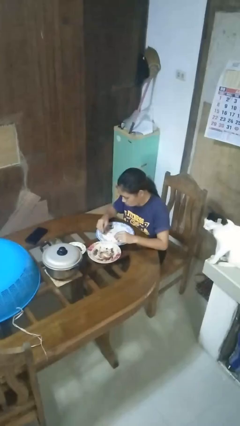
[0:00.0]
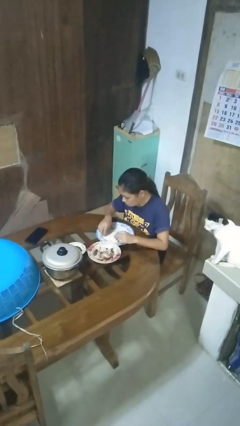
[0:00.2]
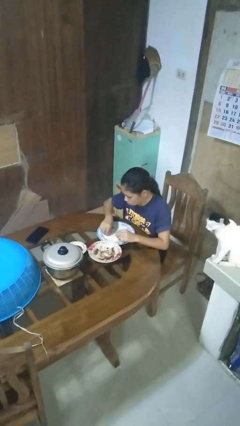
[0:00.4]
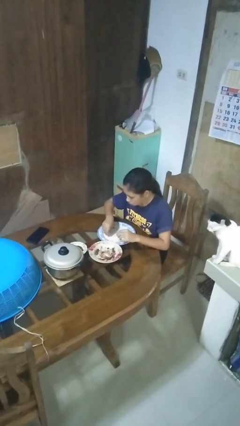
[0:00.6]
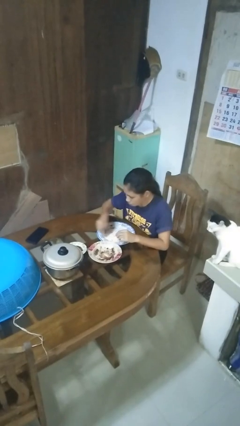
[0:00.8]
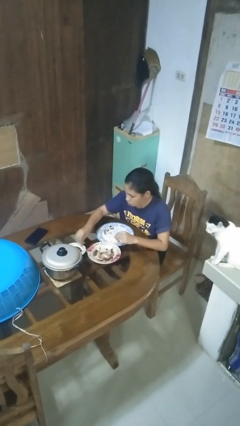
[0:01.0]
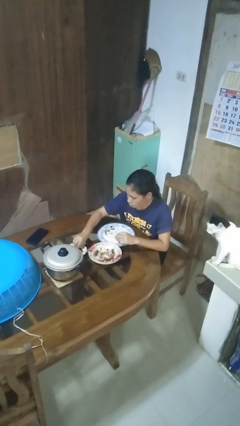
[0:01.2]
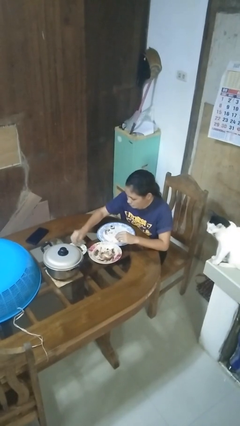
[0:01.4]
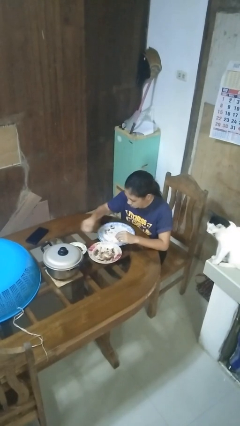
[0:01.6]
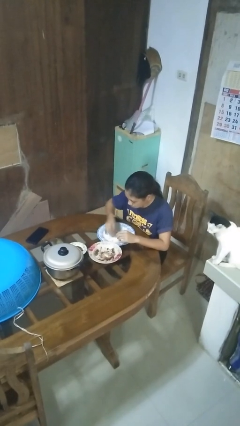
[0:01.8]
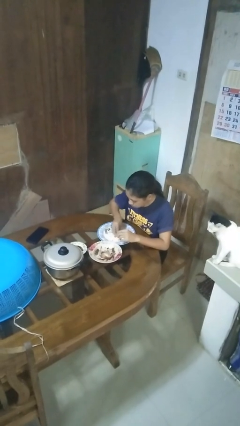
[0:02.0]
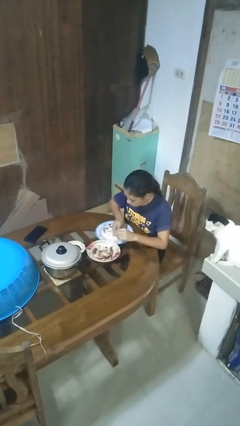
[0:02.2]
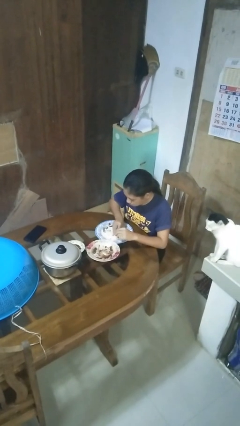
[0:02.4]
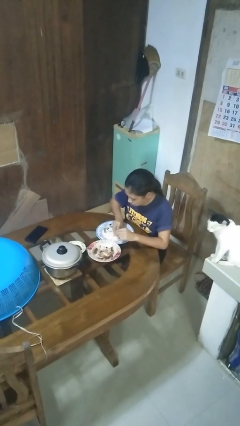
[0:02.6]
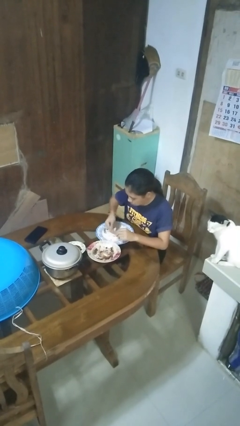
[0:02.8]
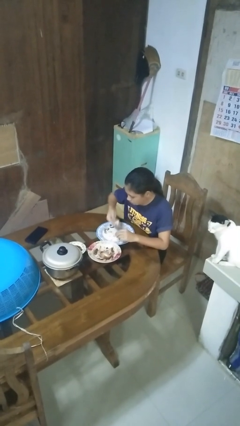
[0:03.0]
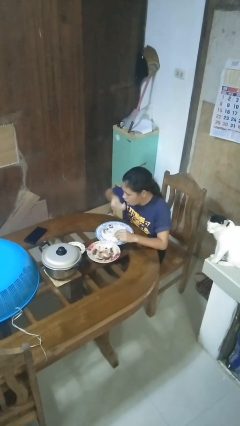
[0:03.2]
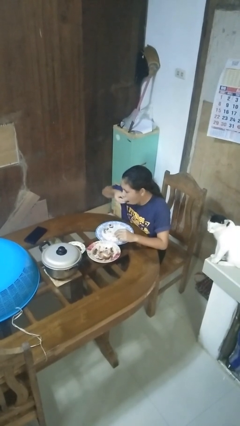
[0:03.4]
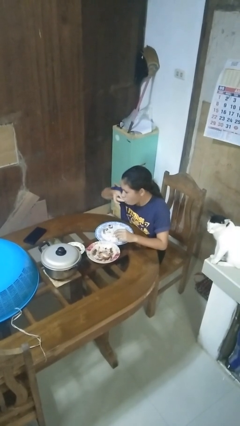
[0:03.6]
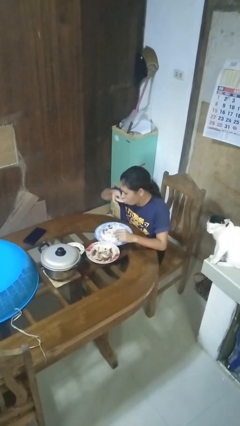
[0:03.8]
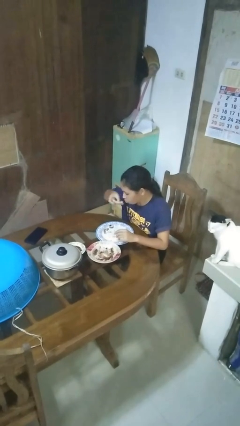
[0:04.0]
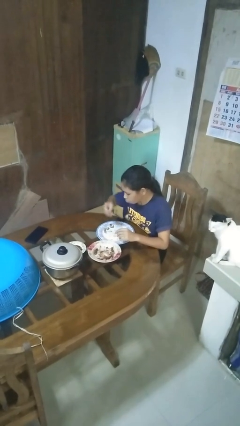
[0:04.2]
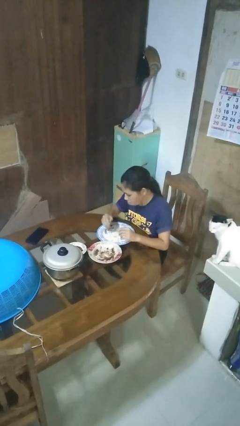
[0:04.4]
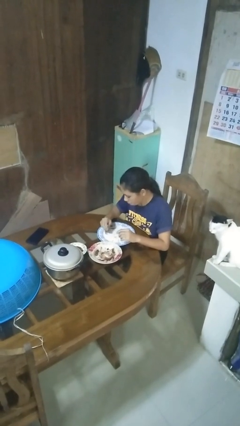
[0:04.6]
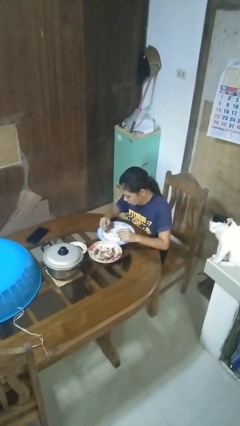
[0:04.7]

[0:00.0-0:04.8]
person eats with hands

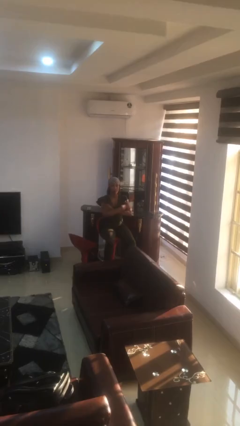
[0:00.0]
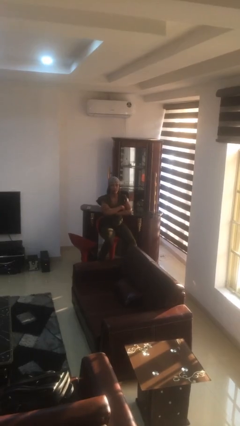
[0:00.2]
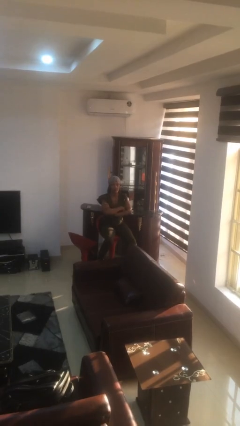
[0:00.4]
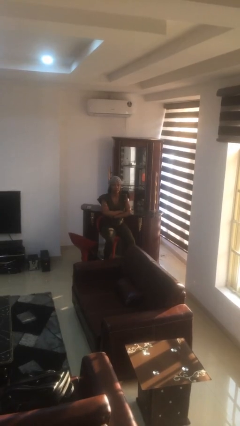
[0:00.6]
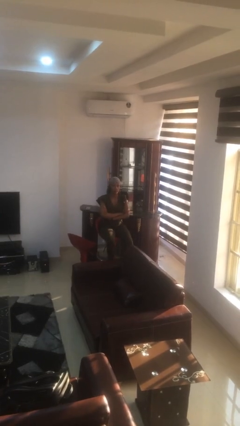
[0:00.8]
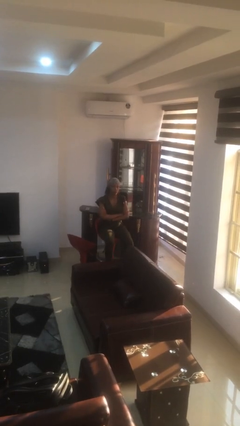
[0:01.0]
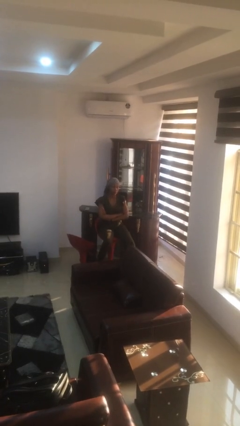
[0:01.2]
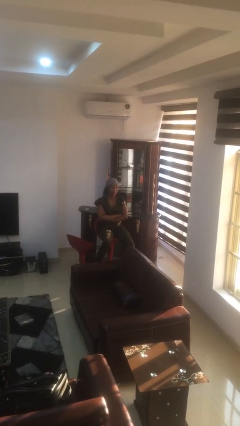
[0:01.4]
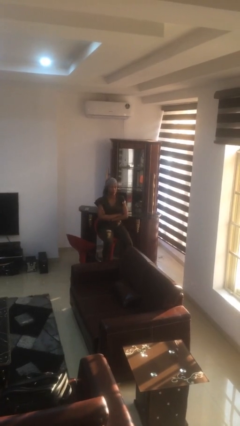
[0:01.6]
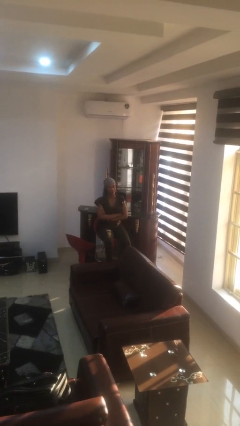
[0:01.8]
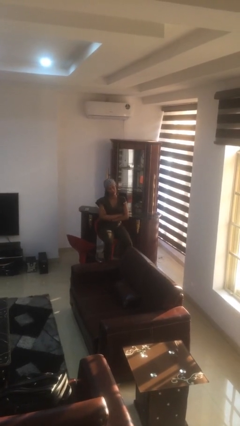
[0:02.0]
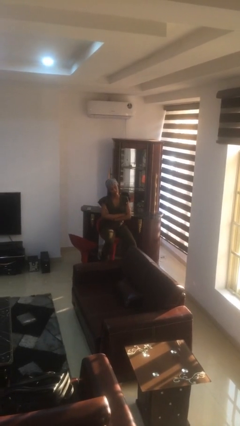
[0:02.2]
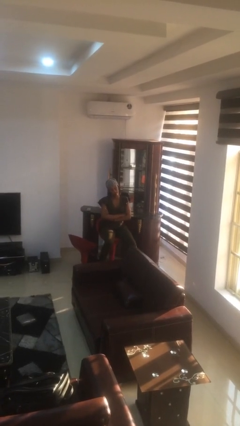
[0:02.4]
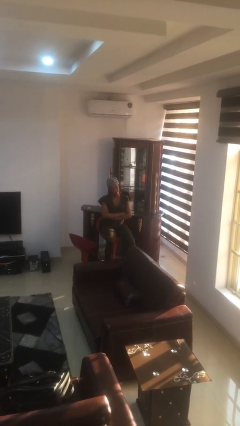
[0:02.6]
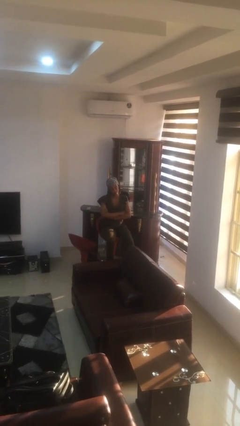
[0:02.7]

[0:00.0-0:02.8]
person crosses arms

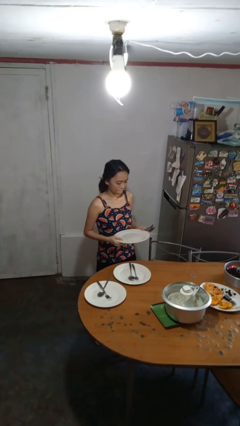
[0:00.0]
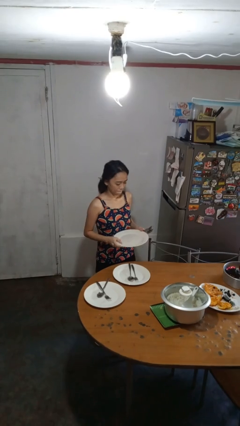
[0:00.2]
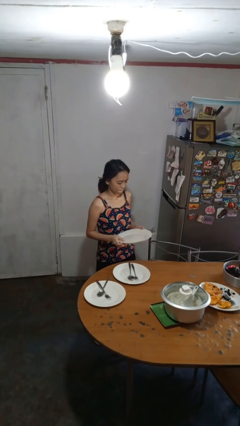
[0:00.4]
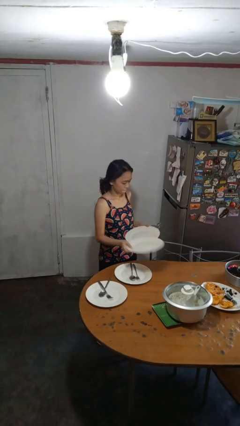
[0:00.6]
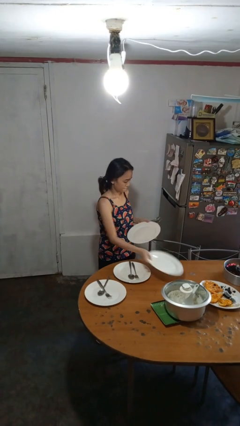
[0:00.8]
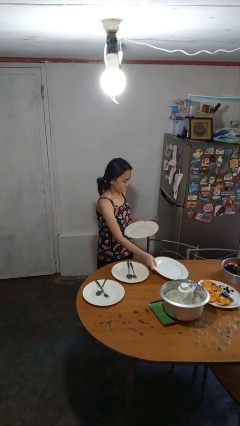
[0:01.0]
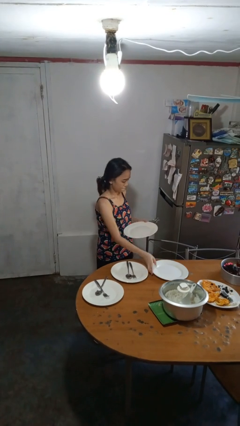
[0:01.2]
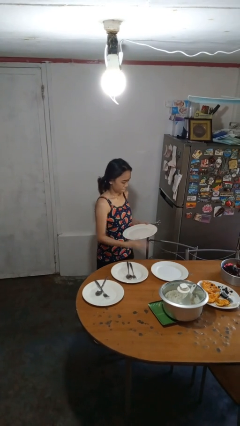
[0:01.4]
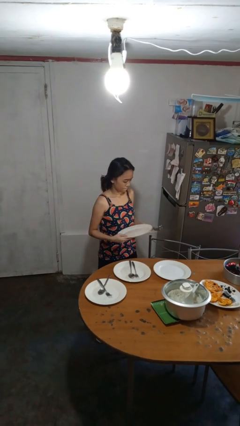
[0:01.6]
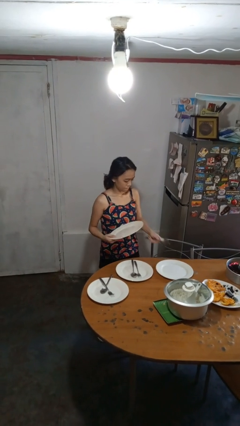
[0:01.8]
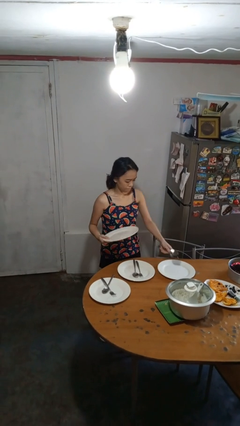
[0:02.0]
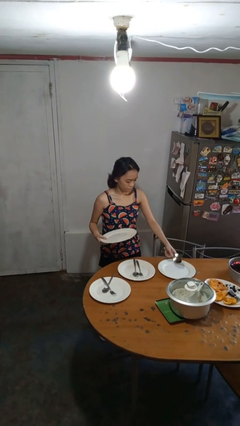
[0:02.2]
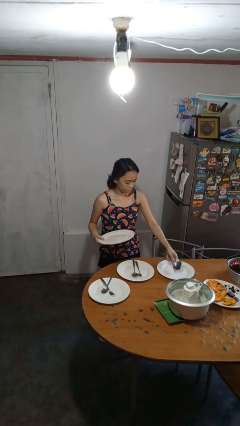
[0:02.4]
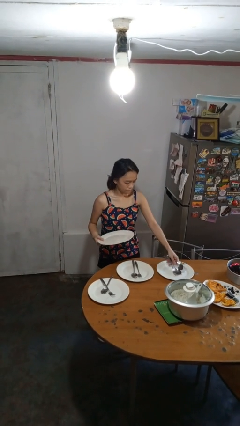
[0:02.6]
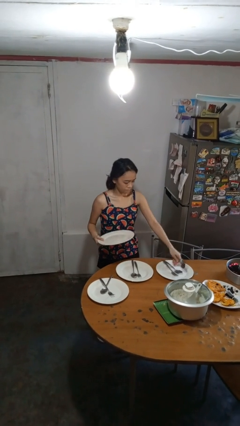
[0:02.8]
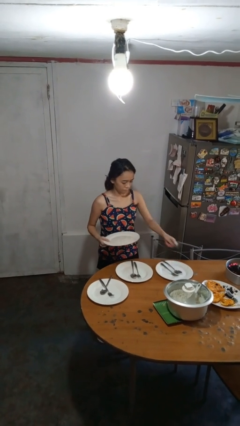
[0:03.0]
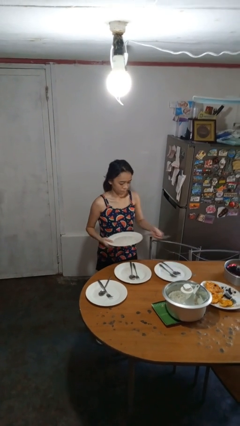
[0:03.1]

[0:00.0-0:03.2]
person sets table

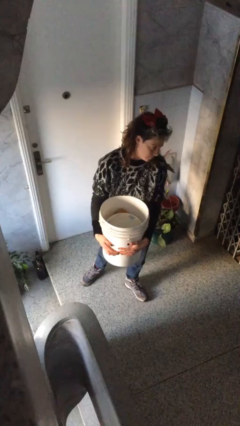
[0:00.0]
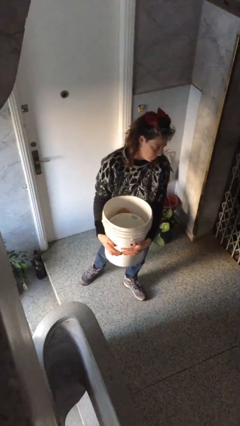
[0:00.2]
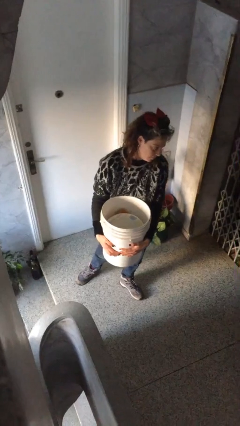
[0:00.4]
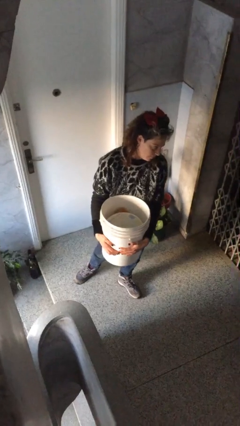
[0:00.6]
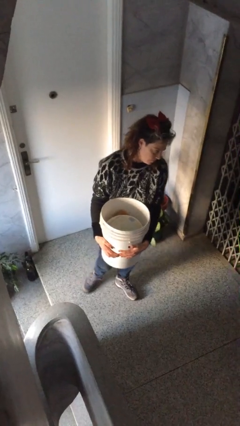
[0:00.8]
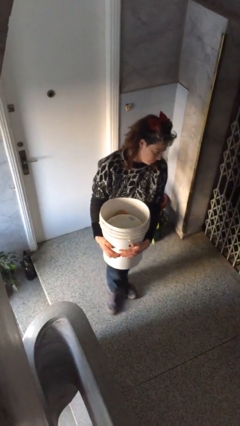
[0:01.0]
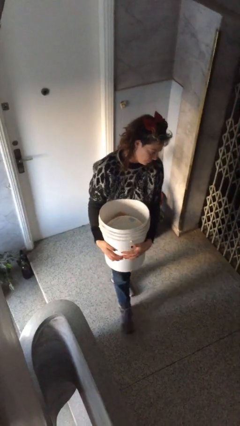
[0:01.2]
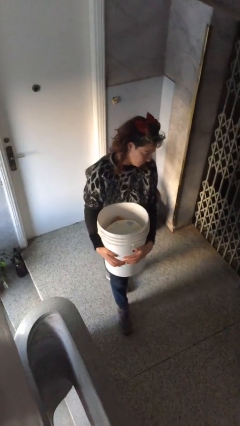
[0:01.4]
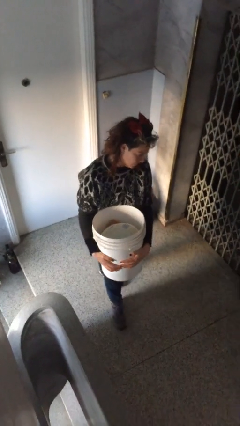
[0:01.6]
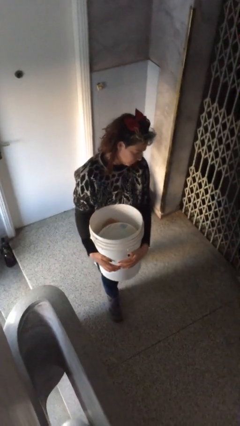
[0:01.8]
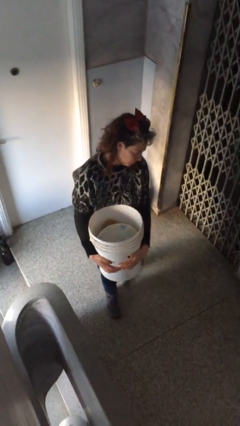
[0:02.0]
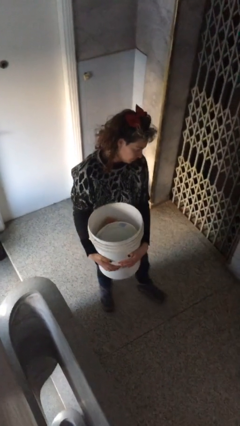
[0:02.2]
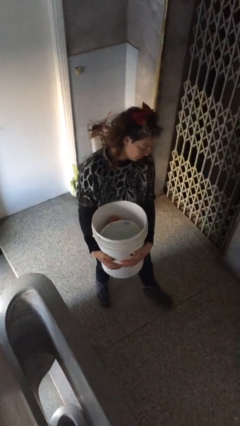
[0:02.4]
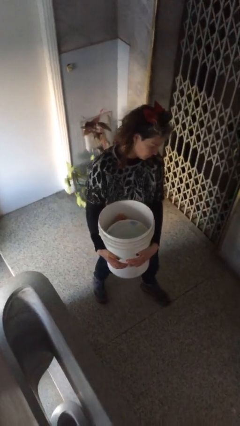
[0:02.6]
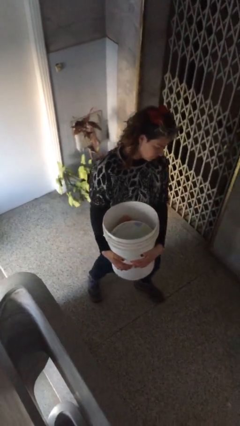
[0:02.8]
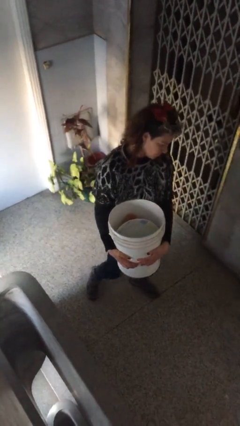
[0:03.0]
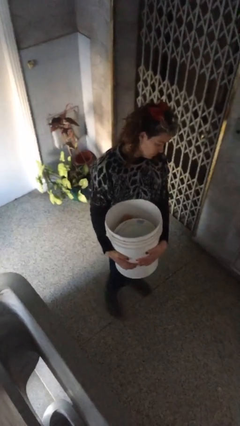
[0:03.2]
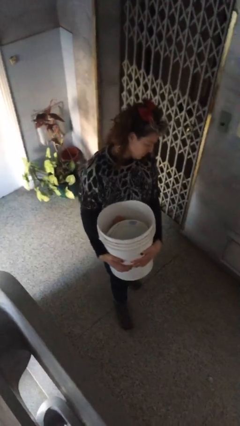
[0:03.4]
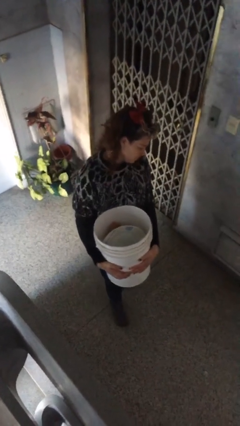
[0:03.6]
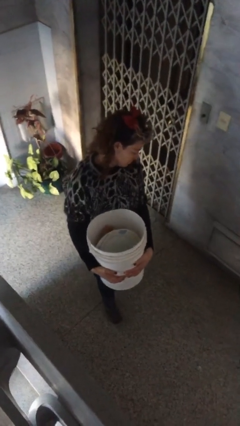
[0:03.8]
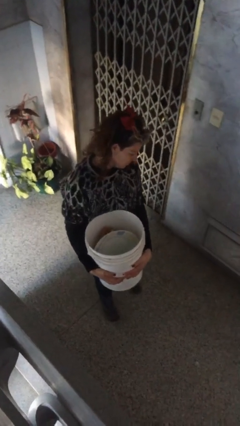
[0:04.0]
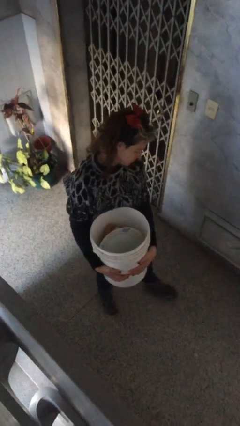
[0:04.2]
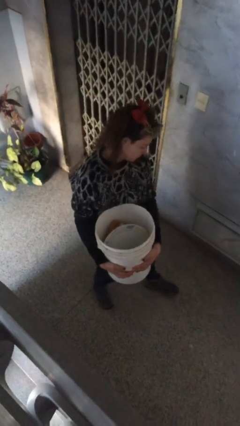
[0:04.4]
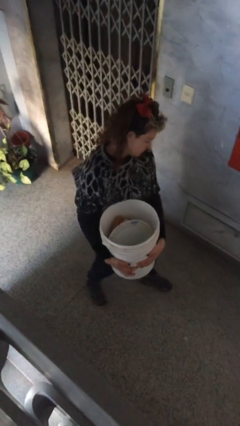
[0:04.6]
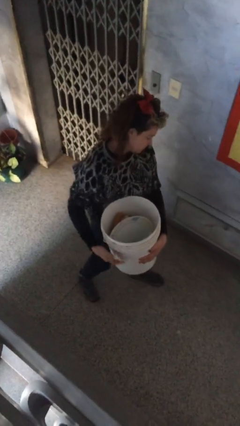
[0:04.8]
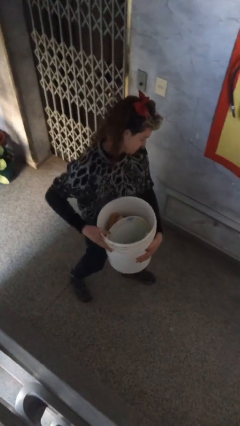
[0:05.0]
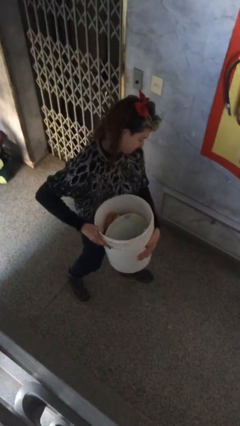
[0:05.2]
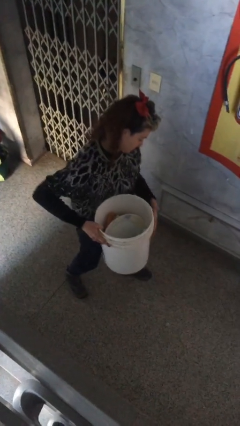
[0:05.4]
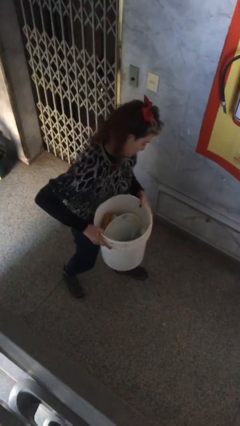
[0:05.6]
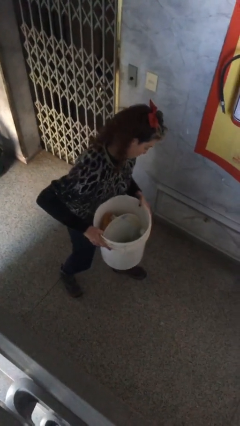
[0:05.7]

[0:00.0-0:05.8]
person carries heavy object

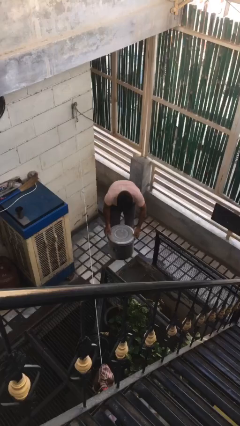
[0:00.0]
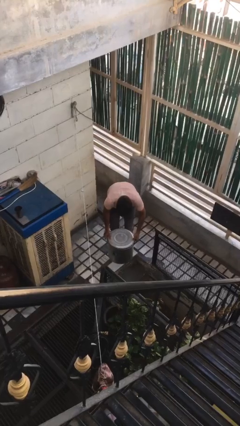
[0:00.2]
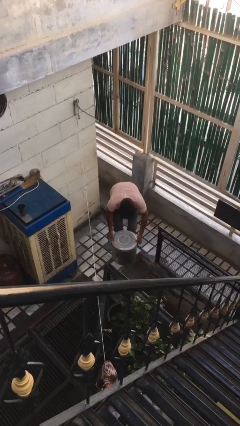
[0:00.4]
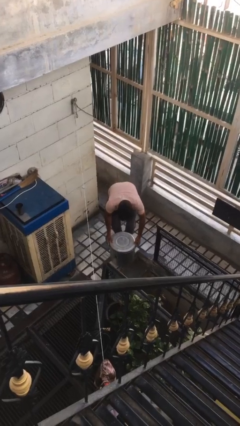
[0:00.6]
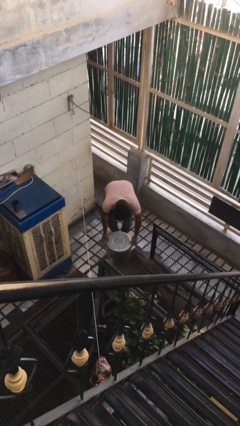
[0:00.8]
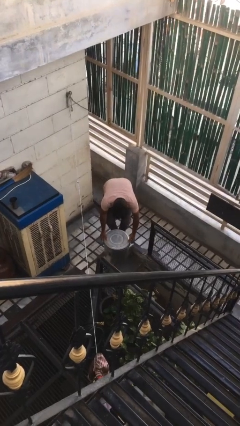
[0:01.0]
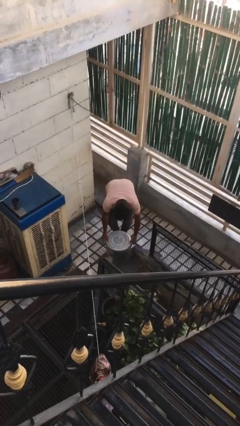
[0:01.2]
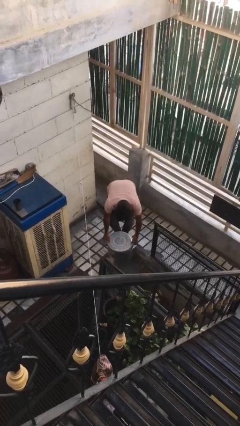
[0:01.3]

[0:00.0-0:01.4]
person puts down object on floor
